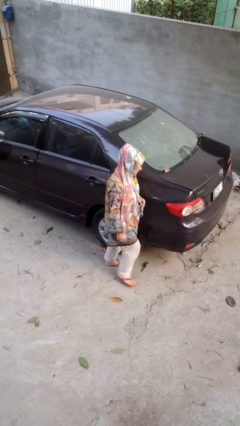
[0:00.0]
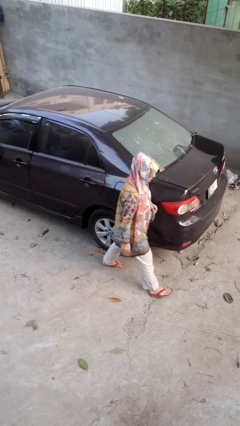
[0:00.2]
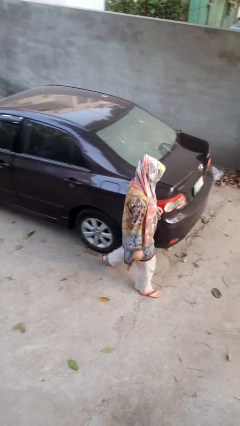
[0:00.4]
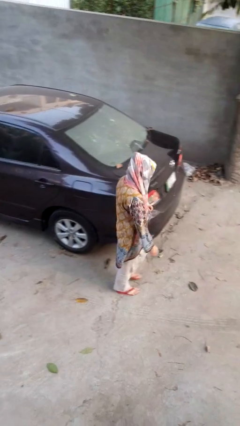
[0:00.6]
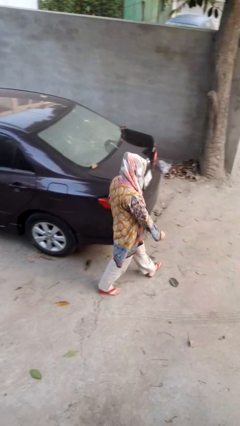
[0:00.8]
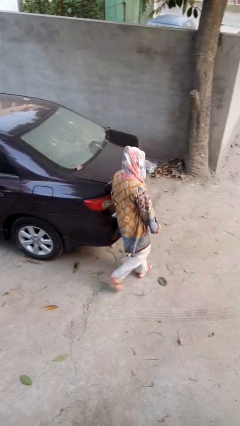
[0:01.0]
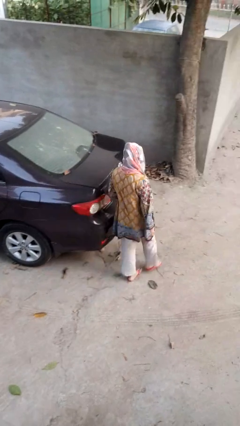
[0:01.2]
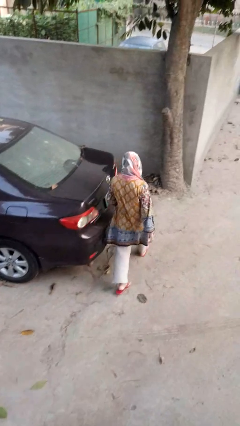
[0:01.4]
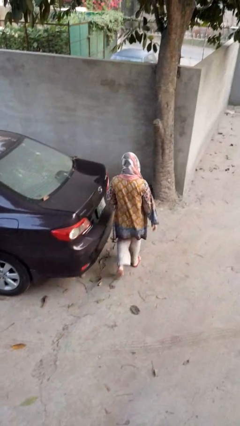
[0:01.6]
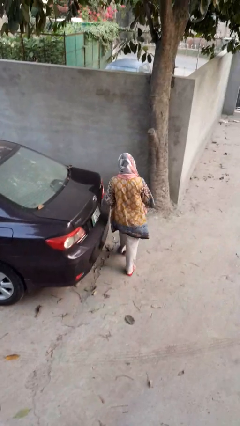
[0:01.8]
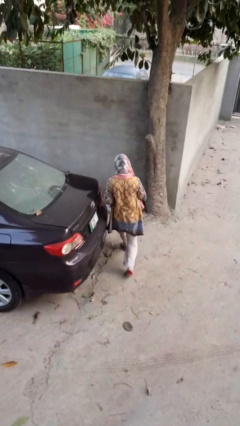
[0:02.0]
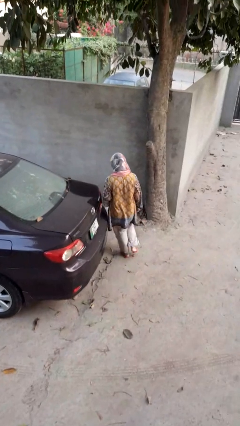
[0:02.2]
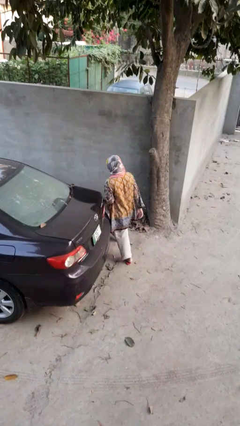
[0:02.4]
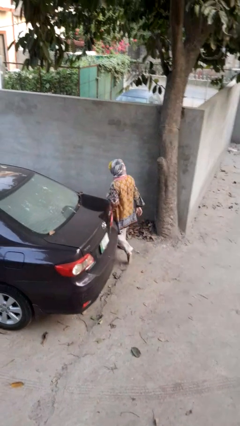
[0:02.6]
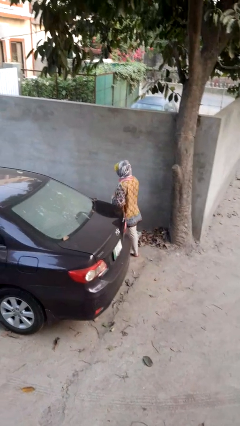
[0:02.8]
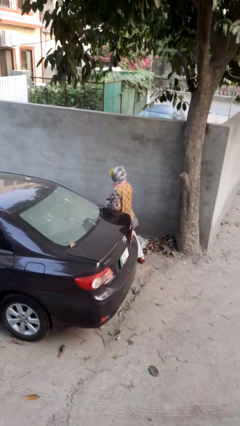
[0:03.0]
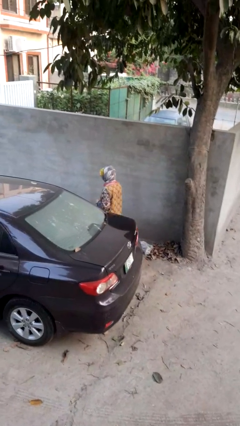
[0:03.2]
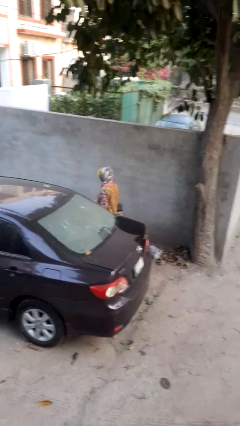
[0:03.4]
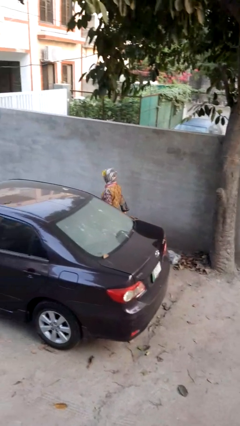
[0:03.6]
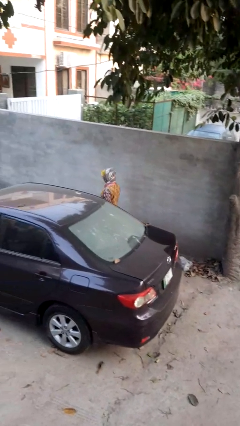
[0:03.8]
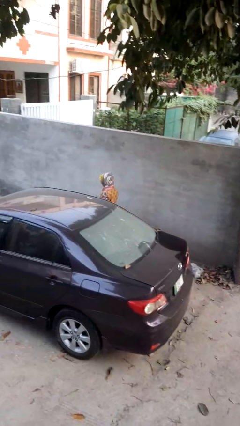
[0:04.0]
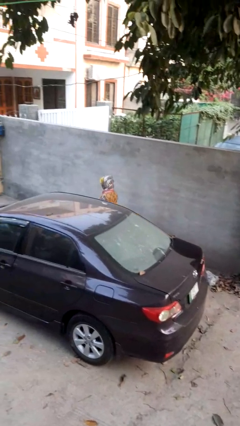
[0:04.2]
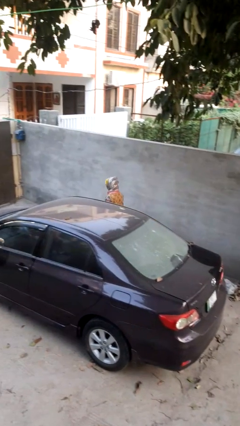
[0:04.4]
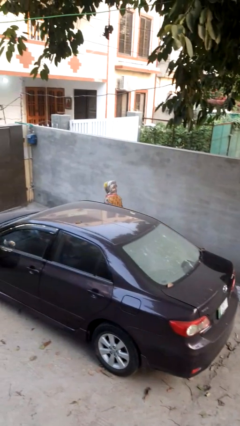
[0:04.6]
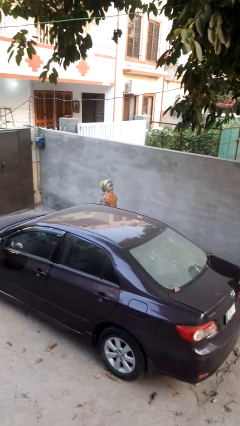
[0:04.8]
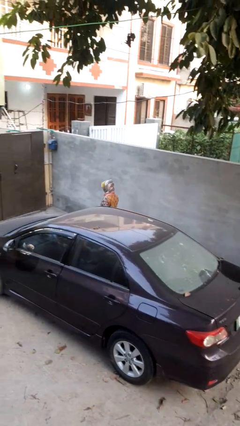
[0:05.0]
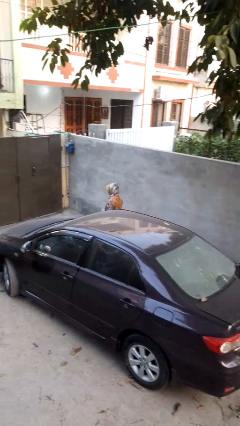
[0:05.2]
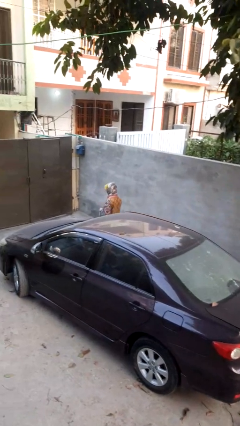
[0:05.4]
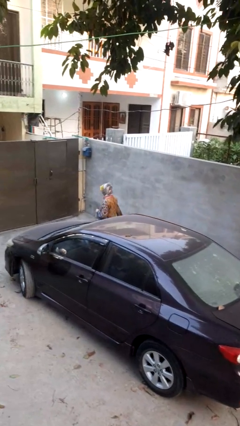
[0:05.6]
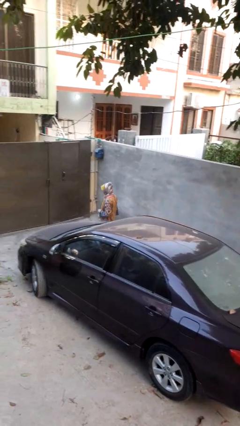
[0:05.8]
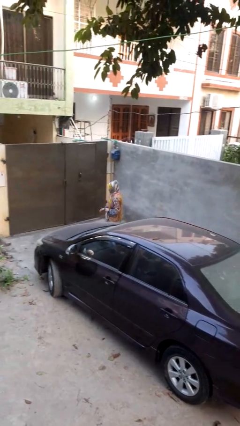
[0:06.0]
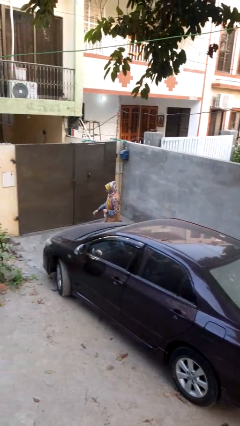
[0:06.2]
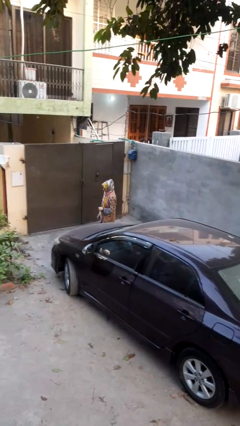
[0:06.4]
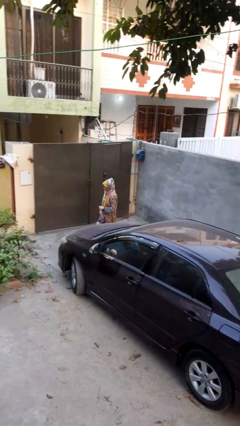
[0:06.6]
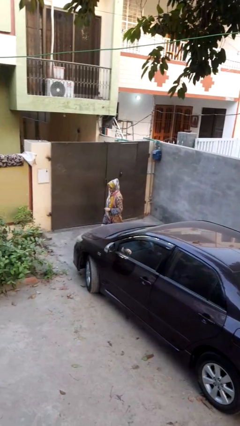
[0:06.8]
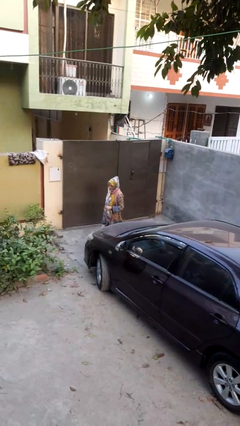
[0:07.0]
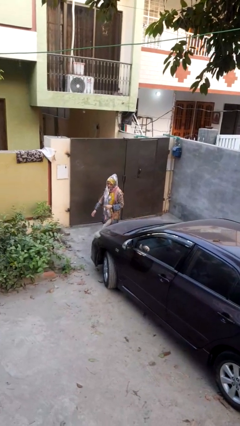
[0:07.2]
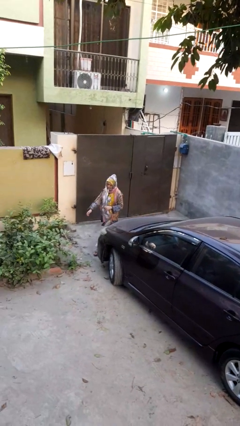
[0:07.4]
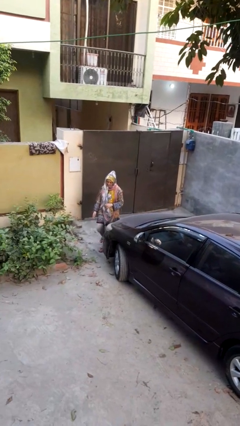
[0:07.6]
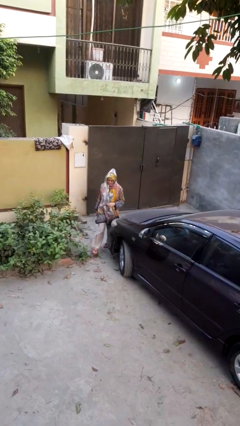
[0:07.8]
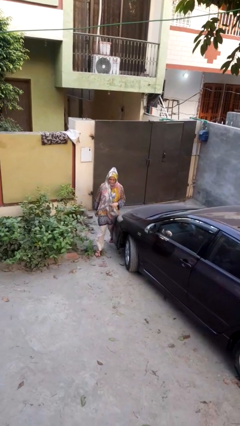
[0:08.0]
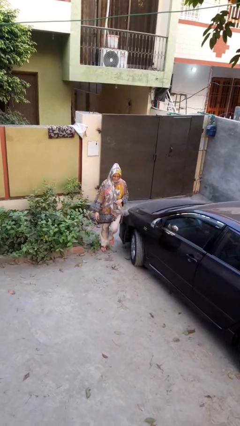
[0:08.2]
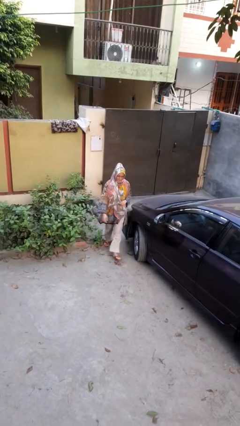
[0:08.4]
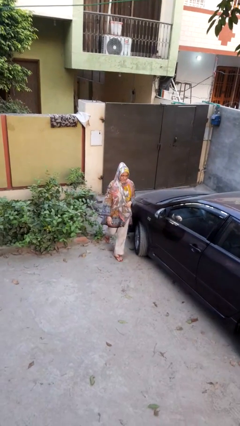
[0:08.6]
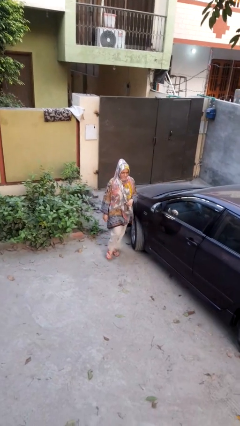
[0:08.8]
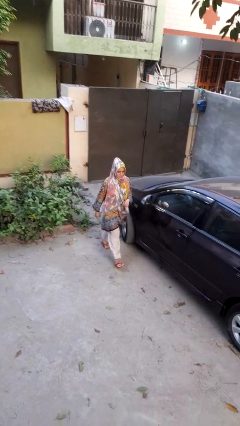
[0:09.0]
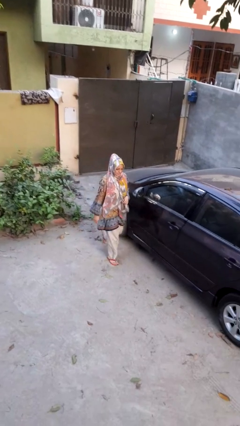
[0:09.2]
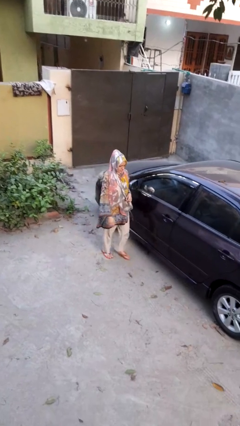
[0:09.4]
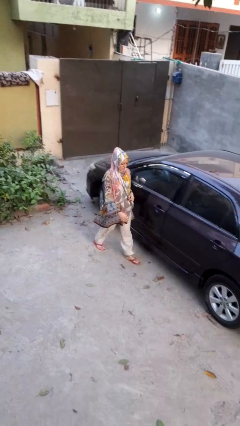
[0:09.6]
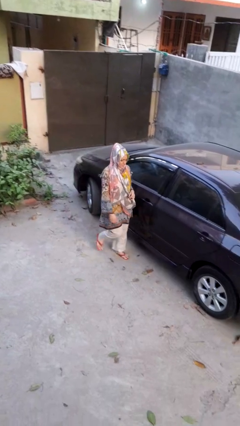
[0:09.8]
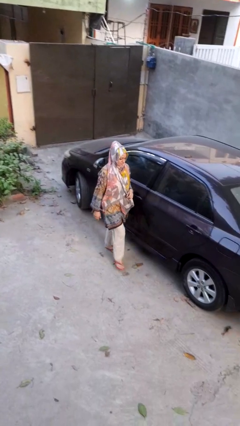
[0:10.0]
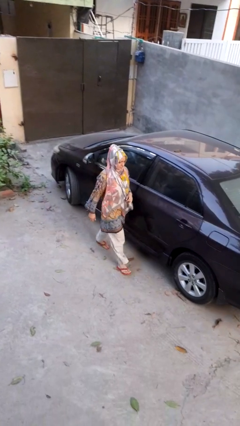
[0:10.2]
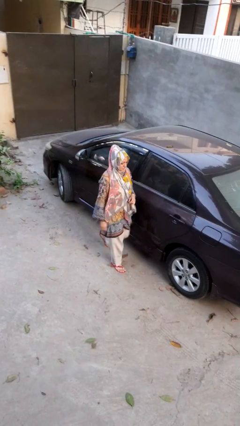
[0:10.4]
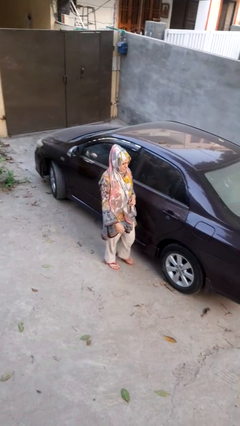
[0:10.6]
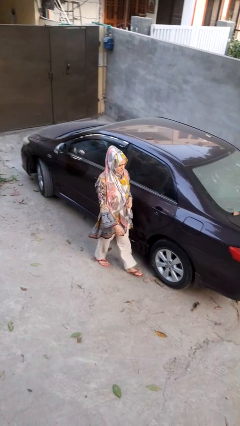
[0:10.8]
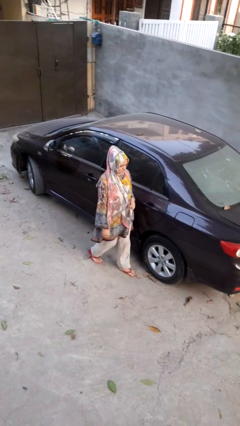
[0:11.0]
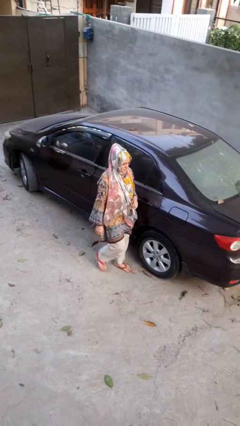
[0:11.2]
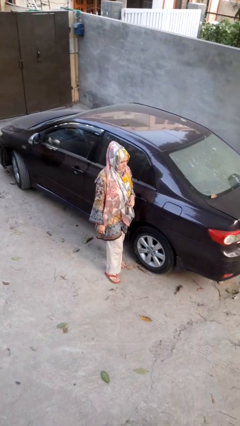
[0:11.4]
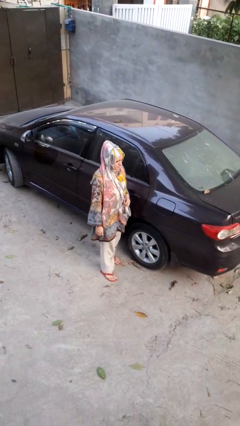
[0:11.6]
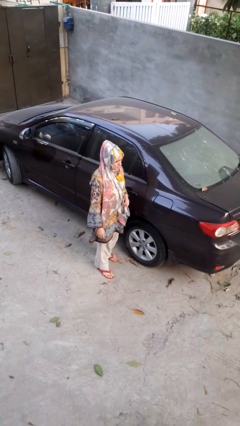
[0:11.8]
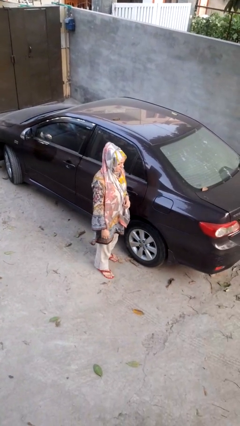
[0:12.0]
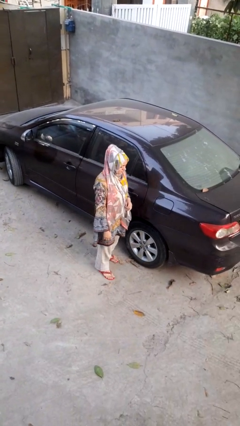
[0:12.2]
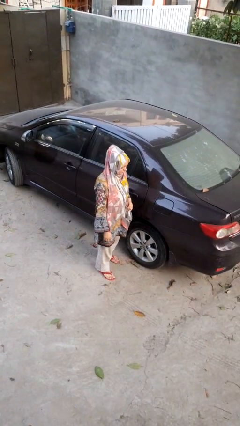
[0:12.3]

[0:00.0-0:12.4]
person walks around car

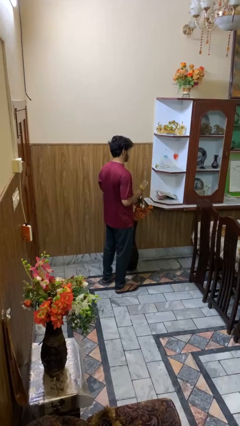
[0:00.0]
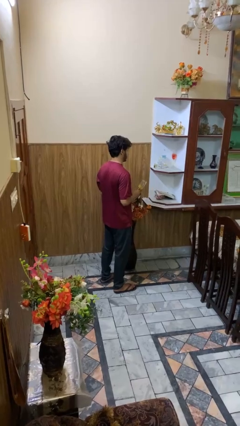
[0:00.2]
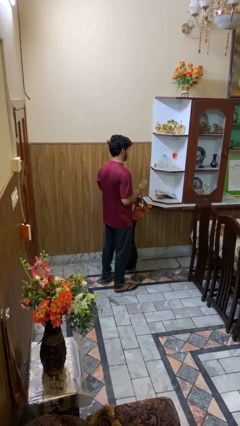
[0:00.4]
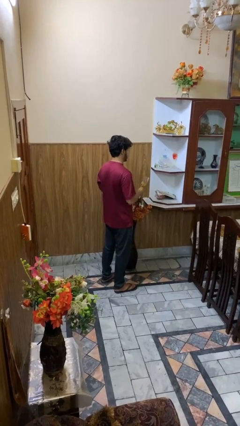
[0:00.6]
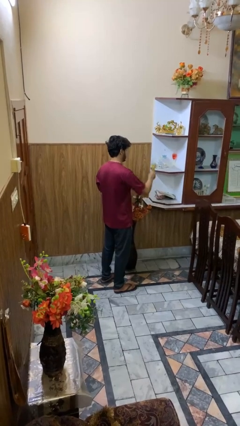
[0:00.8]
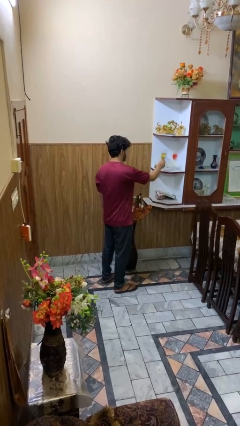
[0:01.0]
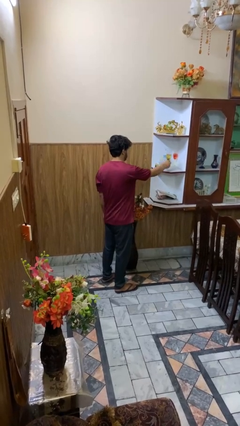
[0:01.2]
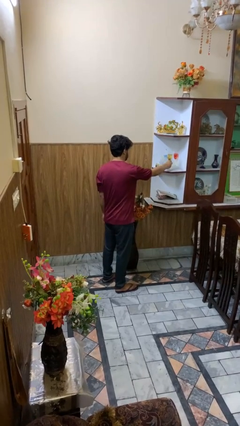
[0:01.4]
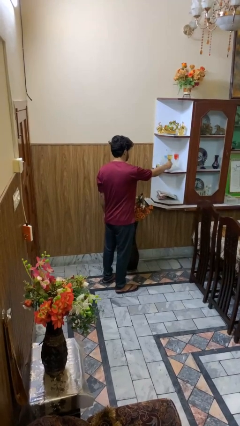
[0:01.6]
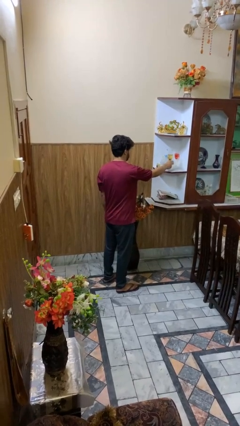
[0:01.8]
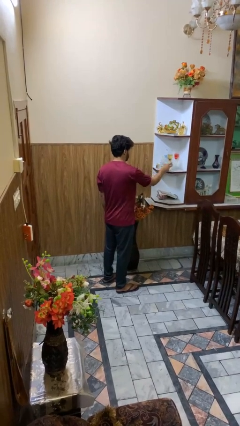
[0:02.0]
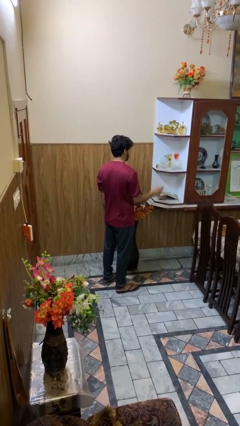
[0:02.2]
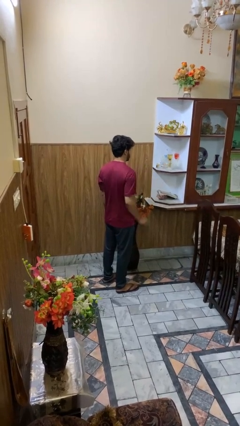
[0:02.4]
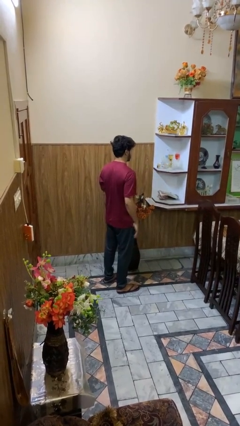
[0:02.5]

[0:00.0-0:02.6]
person puts down object into cabinet

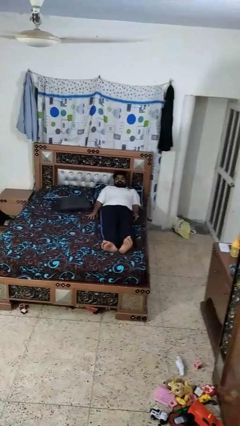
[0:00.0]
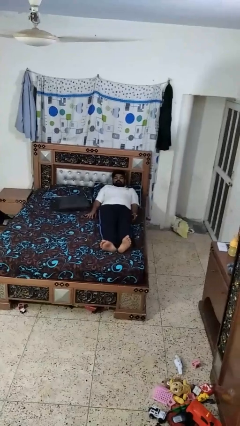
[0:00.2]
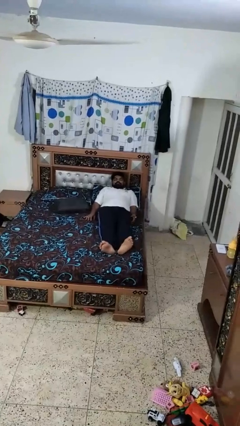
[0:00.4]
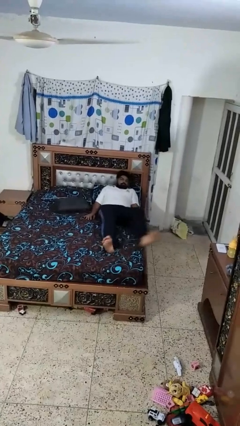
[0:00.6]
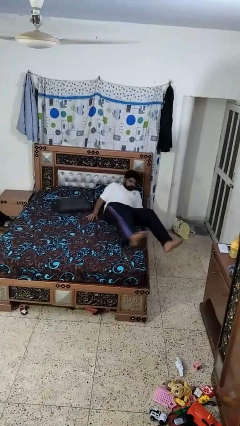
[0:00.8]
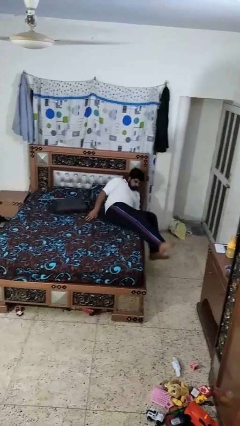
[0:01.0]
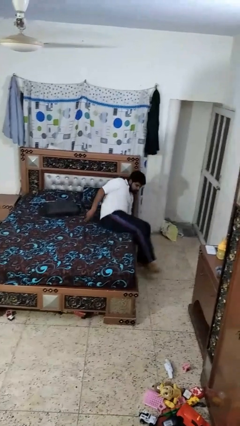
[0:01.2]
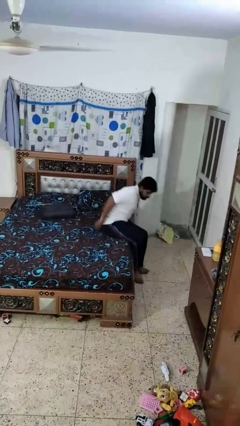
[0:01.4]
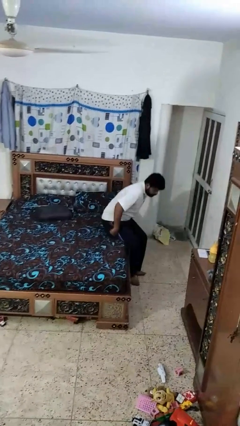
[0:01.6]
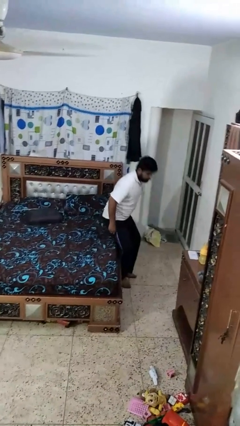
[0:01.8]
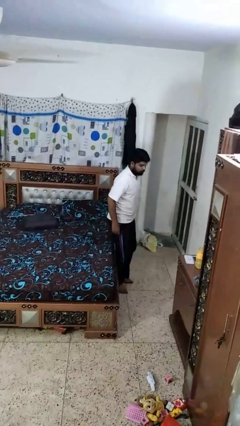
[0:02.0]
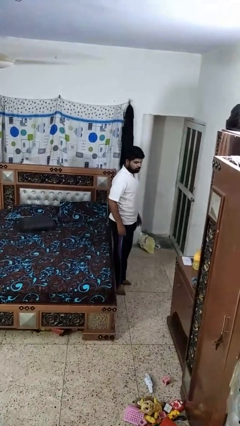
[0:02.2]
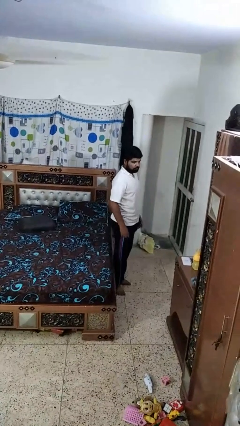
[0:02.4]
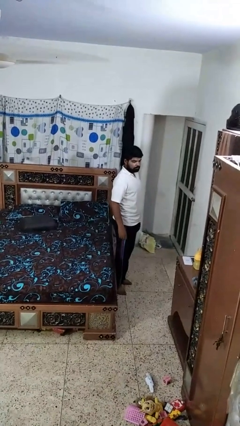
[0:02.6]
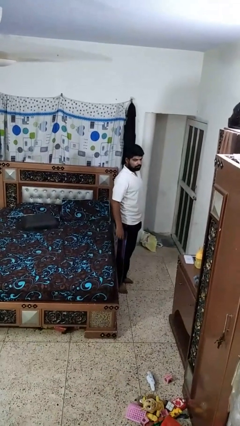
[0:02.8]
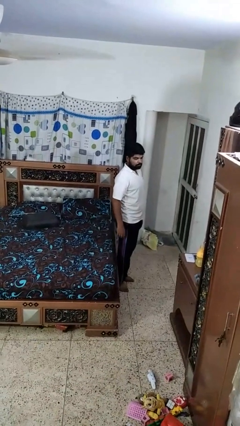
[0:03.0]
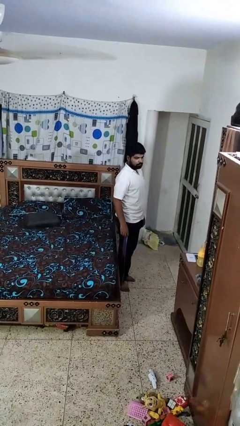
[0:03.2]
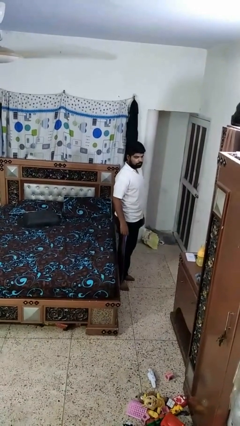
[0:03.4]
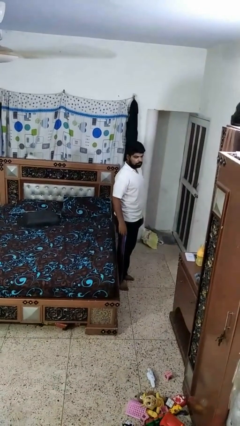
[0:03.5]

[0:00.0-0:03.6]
person stands up

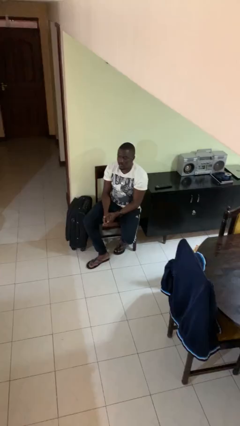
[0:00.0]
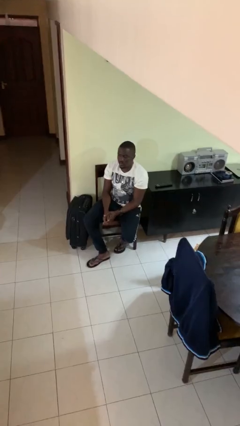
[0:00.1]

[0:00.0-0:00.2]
person scratches face
